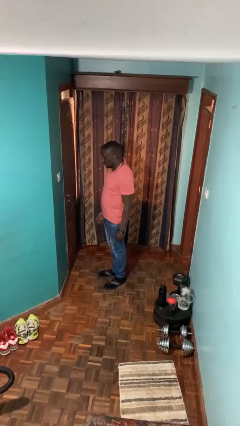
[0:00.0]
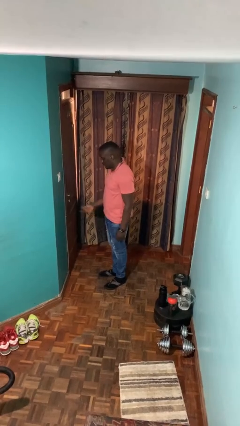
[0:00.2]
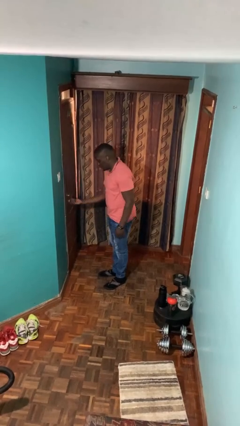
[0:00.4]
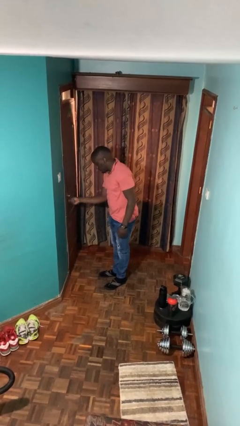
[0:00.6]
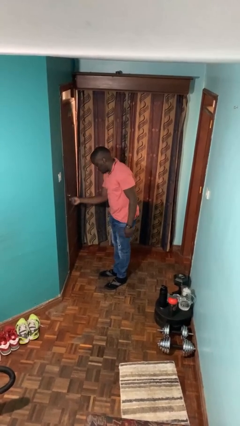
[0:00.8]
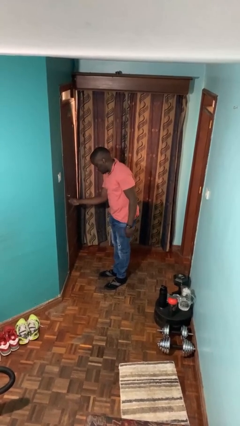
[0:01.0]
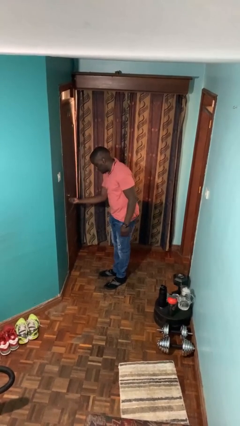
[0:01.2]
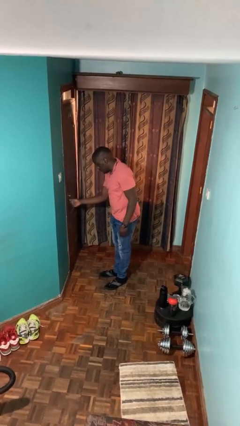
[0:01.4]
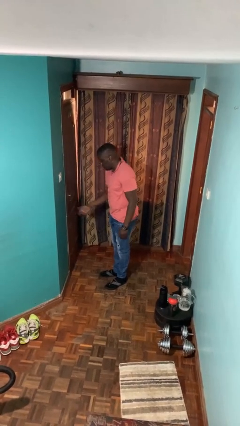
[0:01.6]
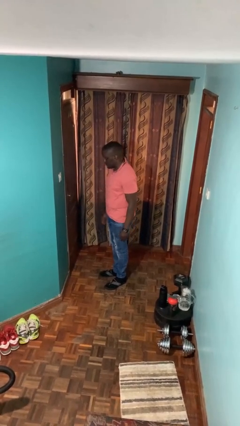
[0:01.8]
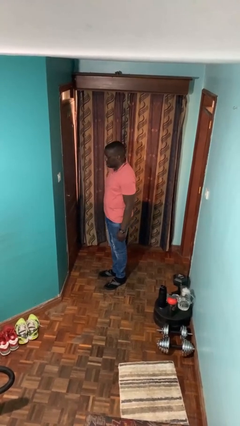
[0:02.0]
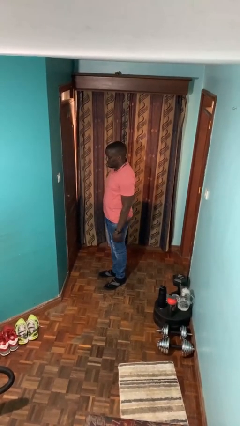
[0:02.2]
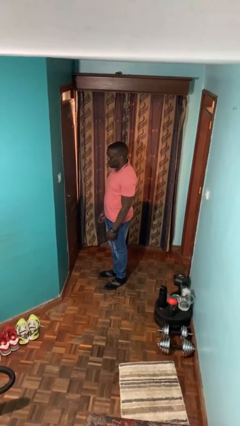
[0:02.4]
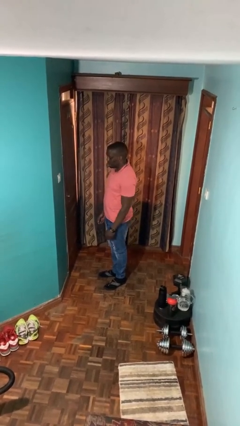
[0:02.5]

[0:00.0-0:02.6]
person locks door with keys

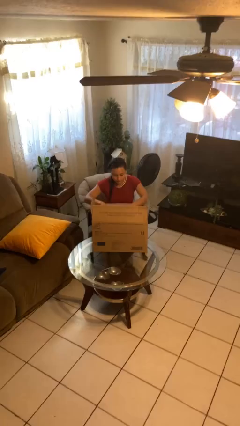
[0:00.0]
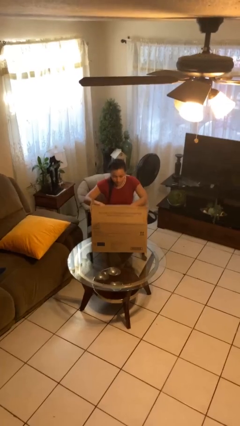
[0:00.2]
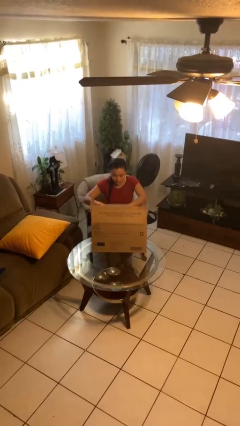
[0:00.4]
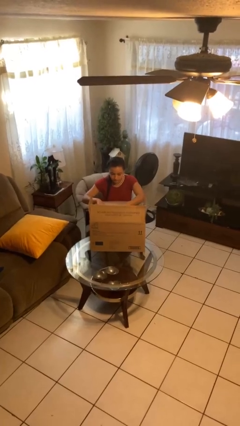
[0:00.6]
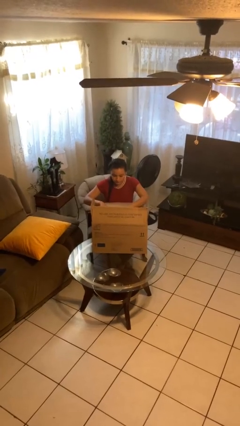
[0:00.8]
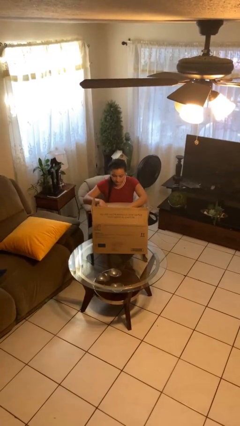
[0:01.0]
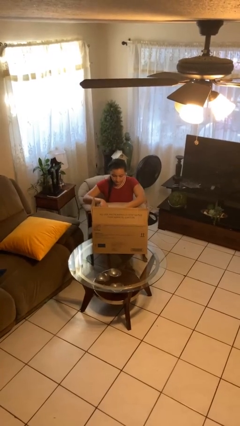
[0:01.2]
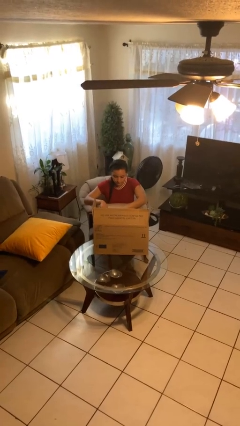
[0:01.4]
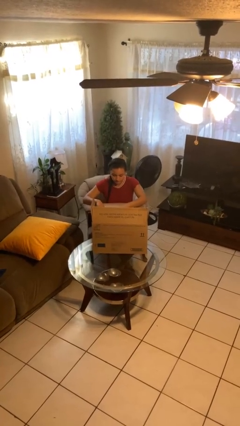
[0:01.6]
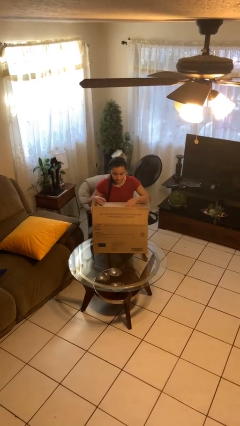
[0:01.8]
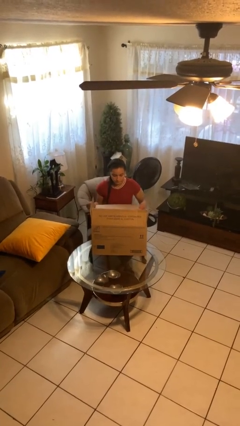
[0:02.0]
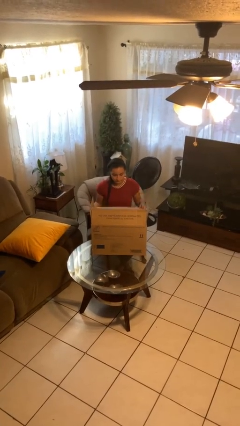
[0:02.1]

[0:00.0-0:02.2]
person searches in box

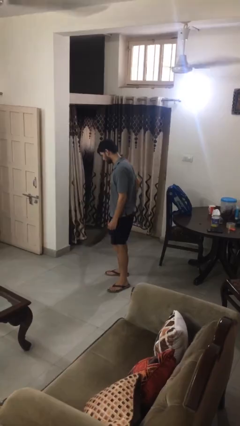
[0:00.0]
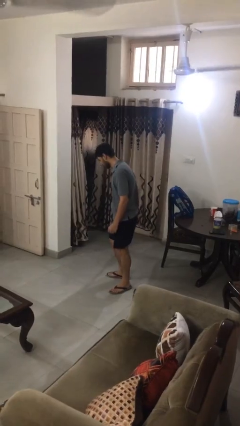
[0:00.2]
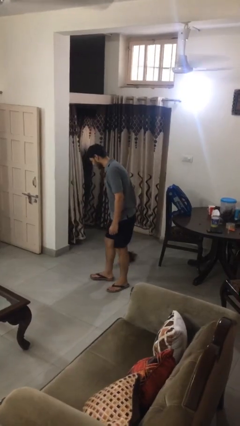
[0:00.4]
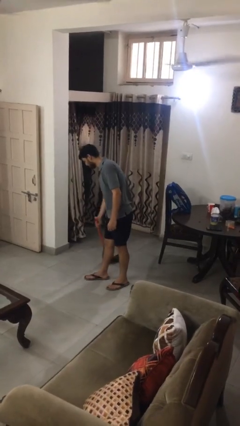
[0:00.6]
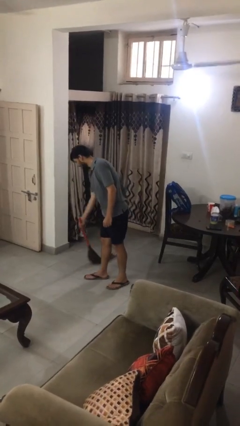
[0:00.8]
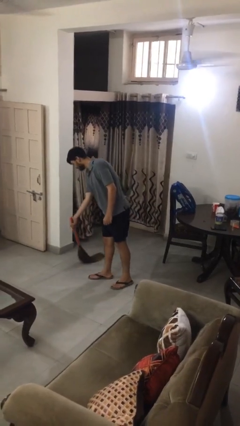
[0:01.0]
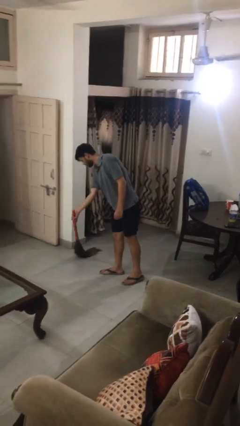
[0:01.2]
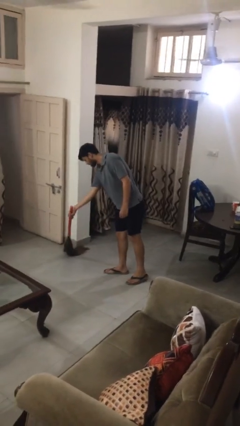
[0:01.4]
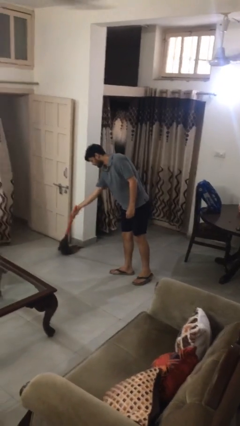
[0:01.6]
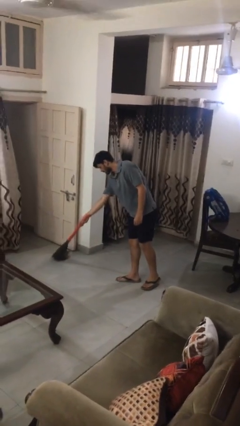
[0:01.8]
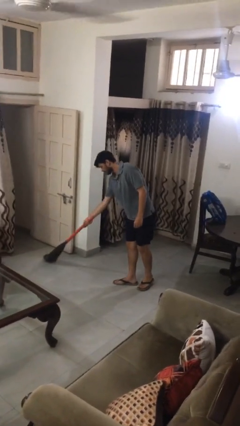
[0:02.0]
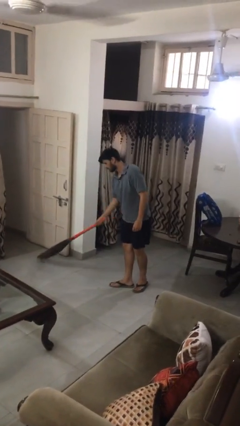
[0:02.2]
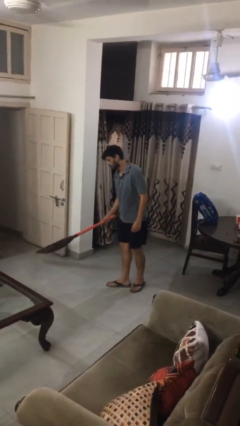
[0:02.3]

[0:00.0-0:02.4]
person sweeps floor

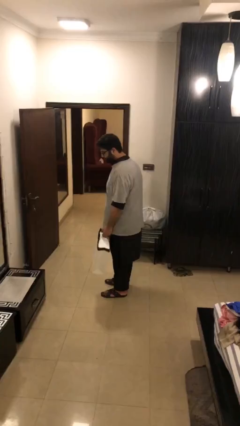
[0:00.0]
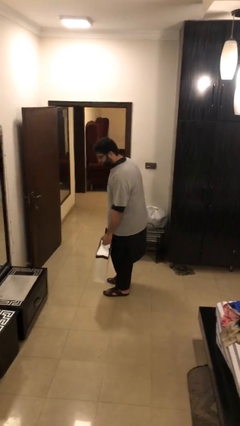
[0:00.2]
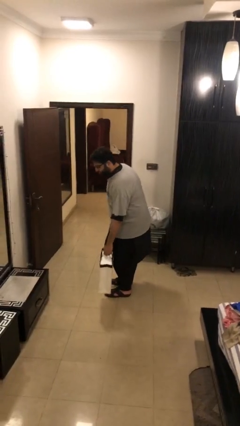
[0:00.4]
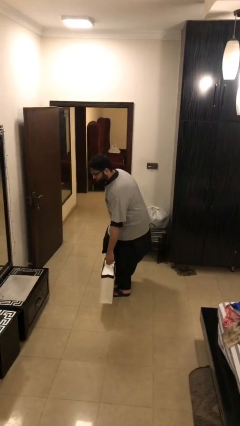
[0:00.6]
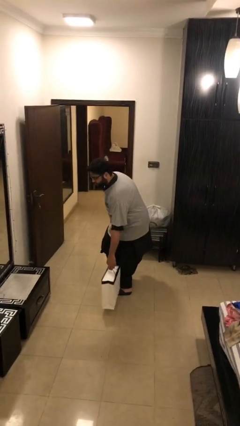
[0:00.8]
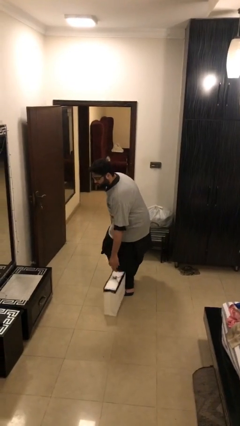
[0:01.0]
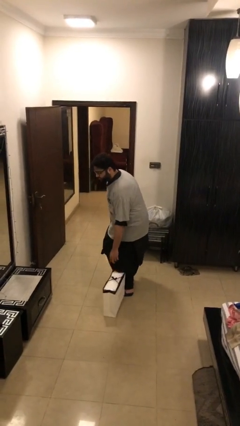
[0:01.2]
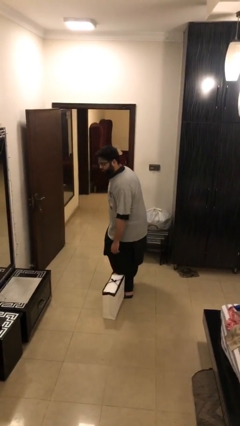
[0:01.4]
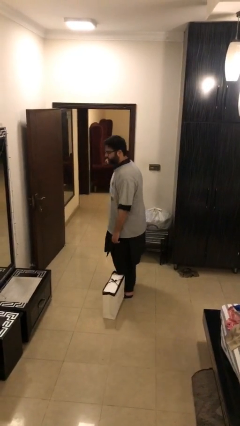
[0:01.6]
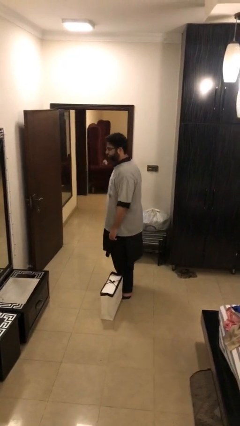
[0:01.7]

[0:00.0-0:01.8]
person puts down object on floor

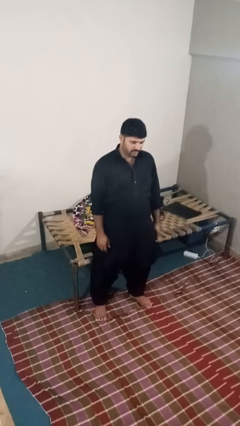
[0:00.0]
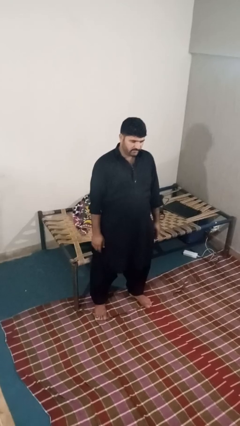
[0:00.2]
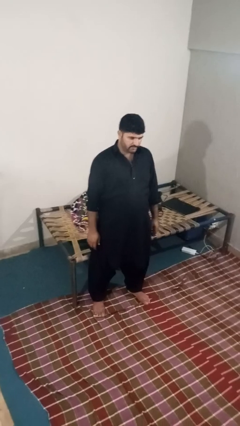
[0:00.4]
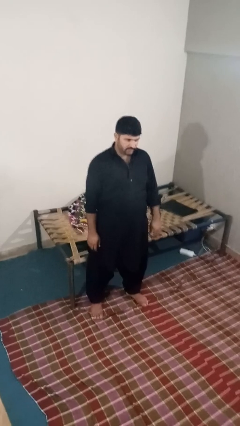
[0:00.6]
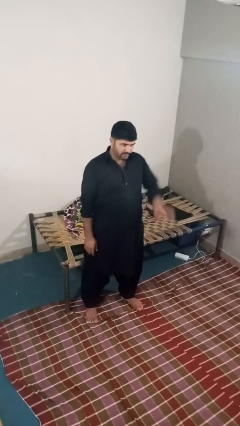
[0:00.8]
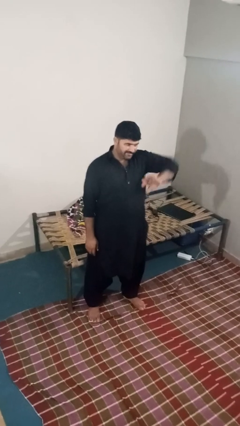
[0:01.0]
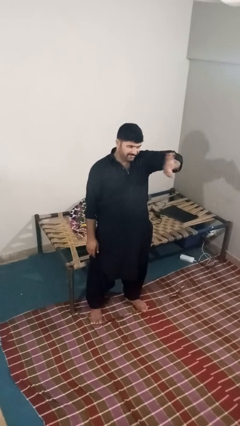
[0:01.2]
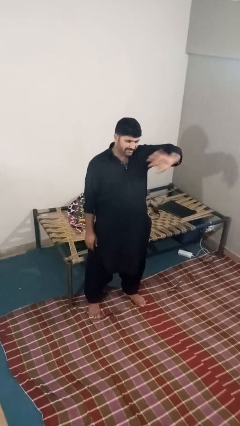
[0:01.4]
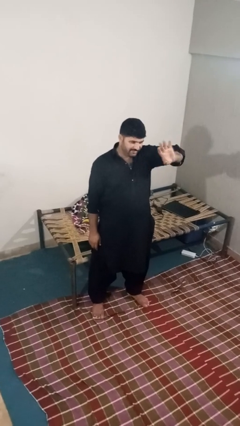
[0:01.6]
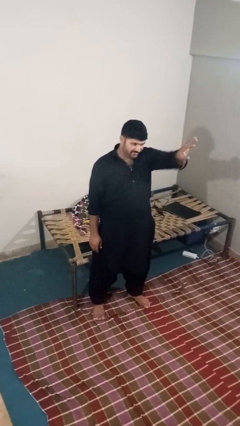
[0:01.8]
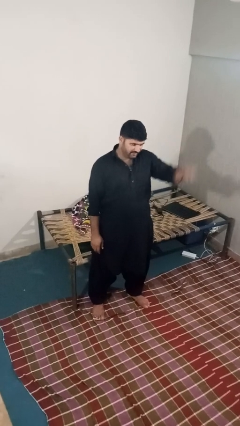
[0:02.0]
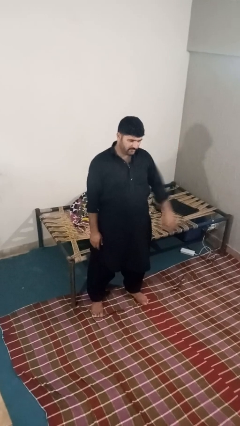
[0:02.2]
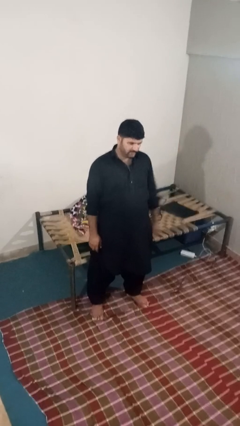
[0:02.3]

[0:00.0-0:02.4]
person gestures swipe left

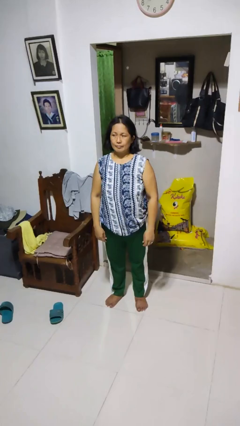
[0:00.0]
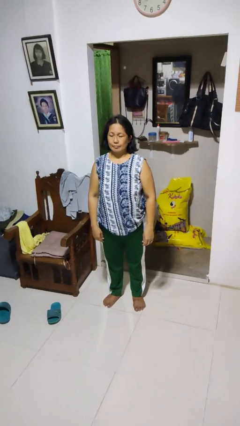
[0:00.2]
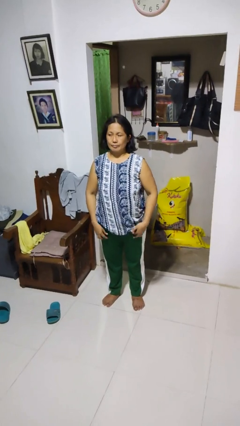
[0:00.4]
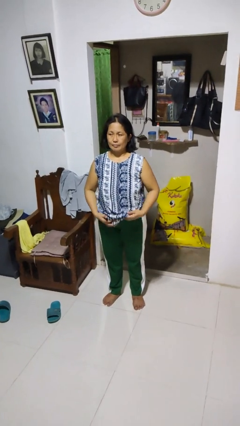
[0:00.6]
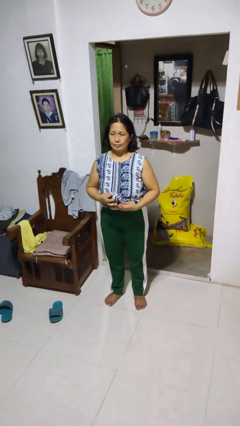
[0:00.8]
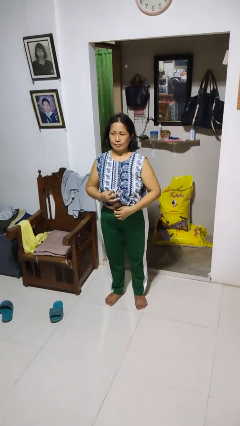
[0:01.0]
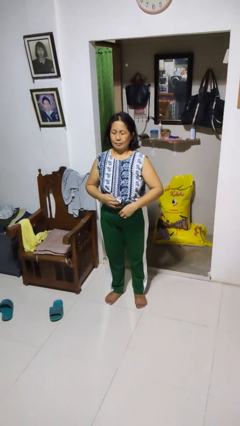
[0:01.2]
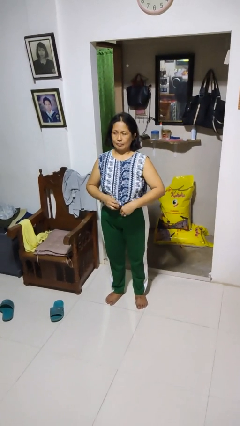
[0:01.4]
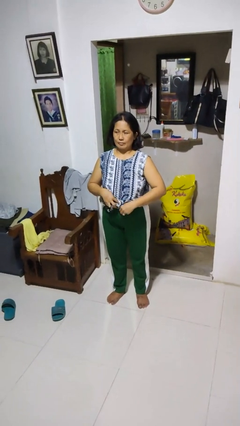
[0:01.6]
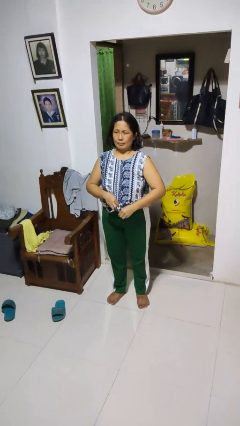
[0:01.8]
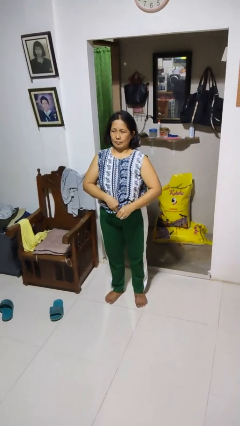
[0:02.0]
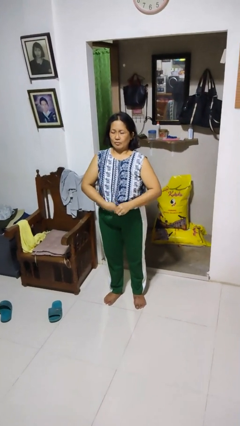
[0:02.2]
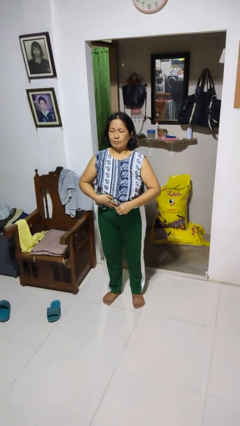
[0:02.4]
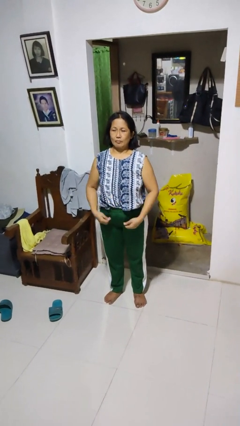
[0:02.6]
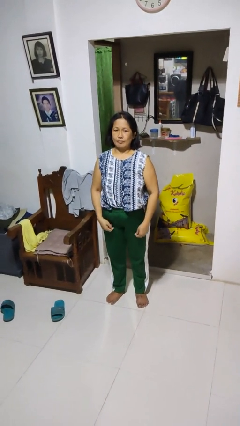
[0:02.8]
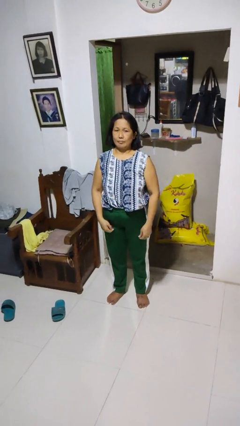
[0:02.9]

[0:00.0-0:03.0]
person tucks in shirt

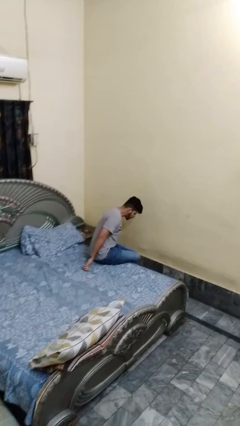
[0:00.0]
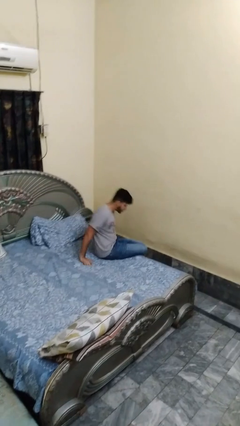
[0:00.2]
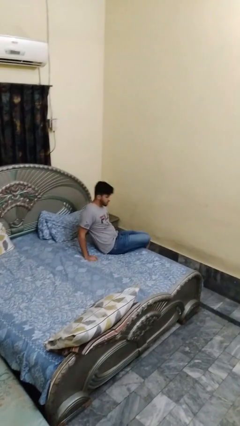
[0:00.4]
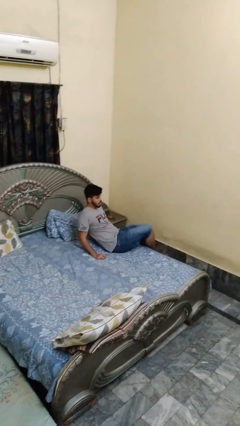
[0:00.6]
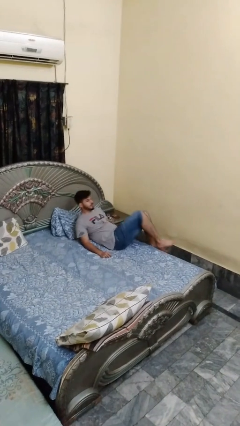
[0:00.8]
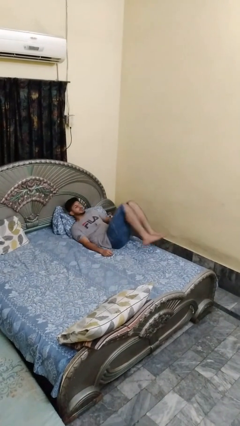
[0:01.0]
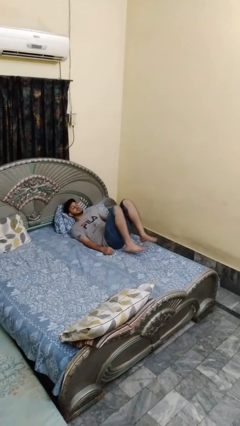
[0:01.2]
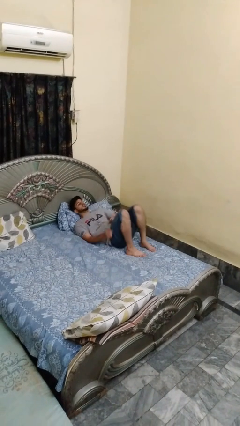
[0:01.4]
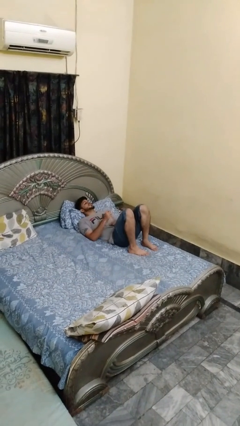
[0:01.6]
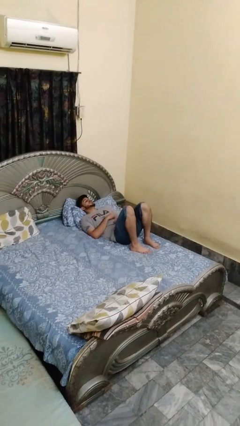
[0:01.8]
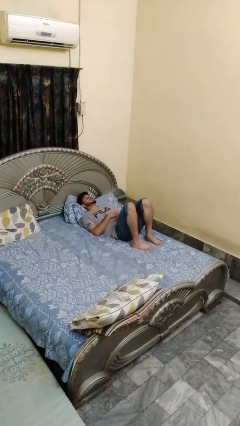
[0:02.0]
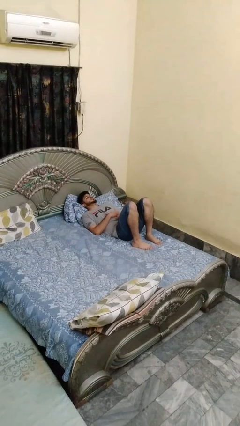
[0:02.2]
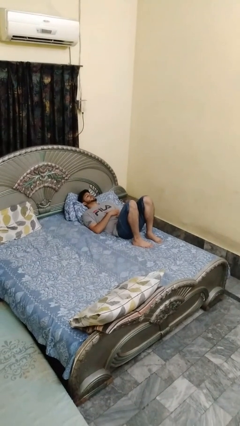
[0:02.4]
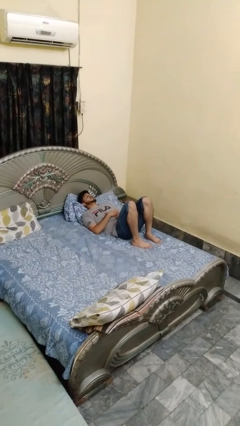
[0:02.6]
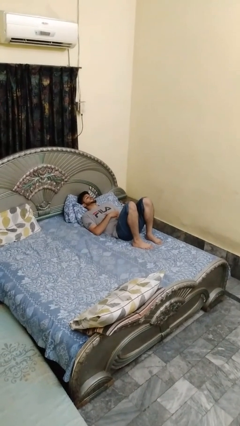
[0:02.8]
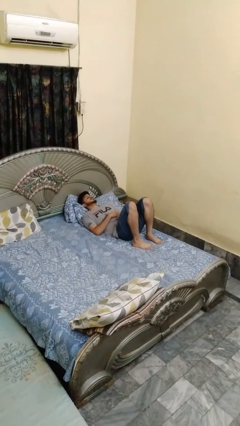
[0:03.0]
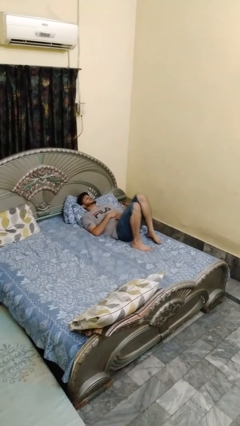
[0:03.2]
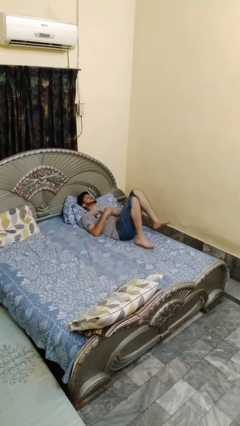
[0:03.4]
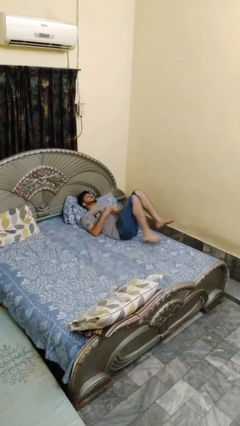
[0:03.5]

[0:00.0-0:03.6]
person lies down on bed
